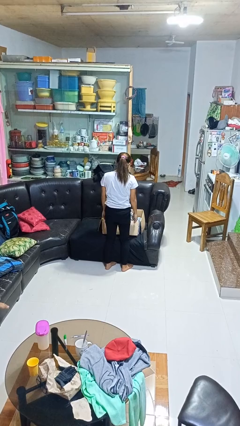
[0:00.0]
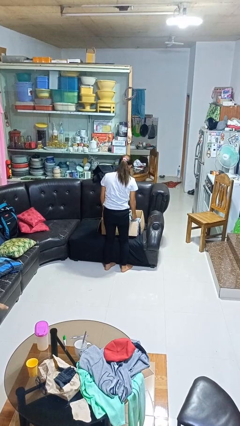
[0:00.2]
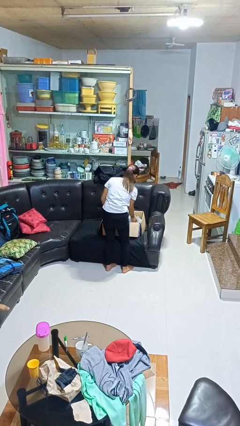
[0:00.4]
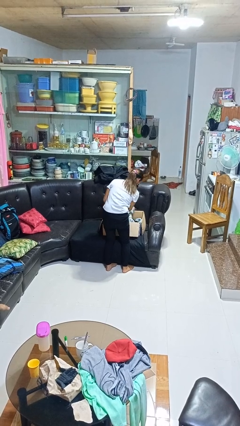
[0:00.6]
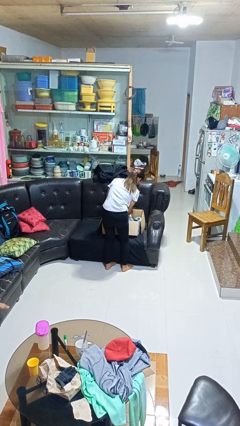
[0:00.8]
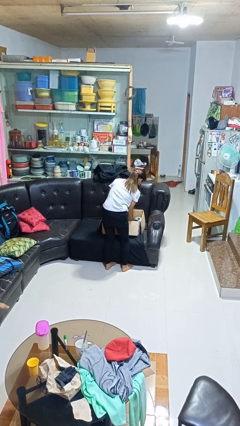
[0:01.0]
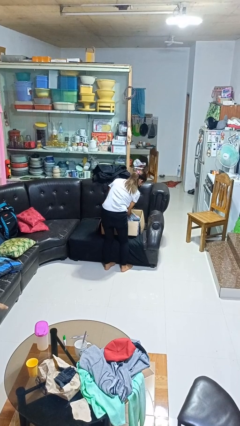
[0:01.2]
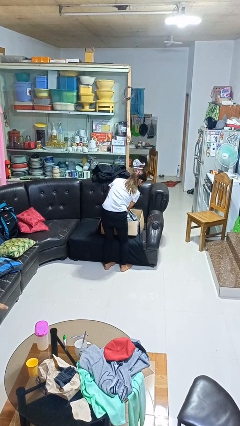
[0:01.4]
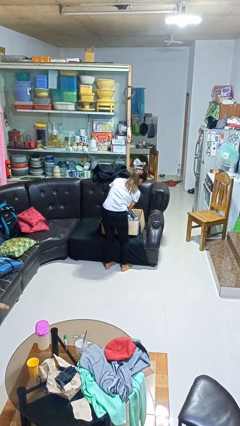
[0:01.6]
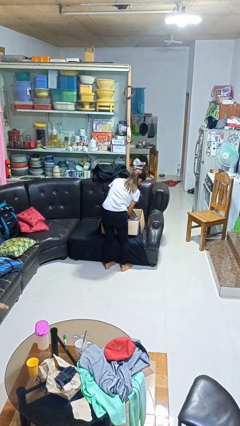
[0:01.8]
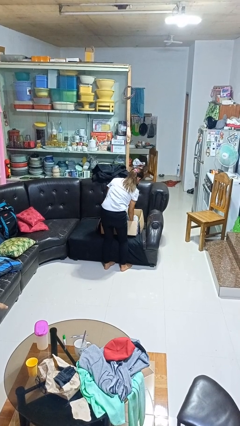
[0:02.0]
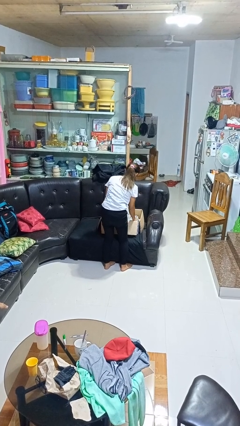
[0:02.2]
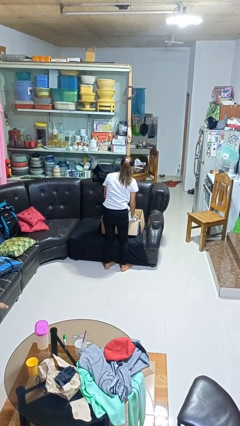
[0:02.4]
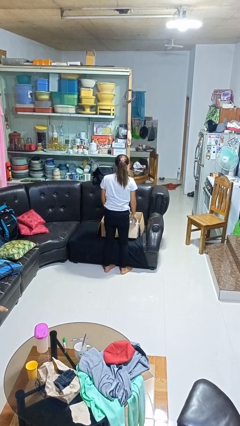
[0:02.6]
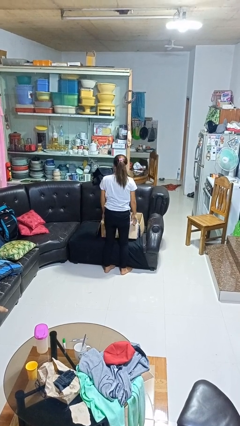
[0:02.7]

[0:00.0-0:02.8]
person searches in box

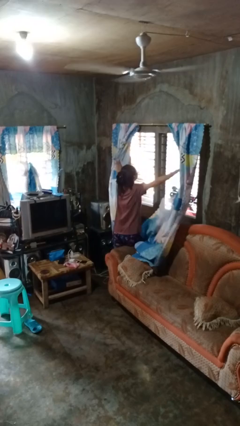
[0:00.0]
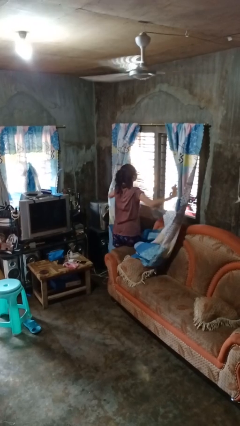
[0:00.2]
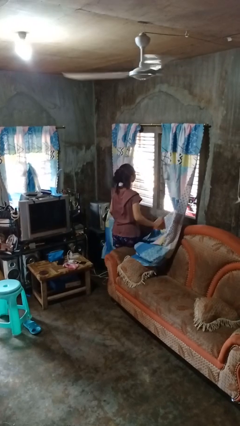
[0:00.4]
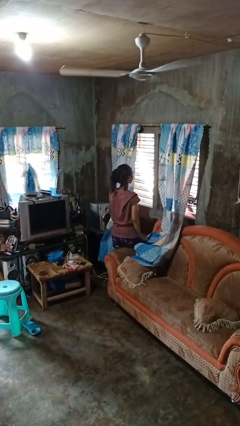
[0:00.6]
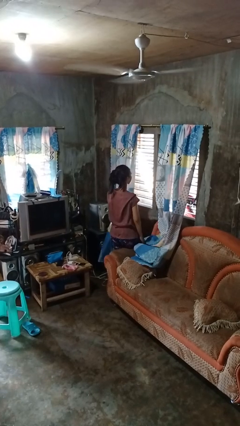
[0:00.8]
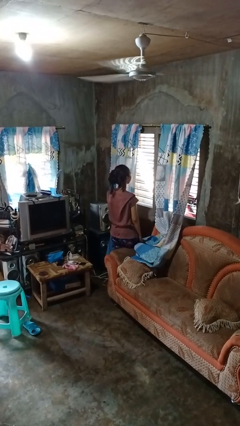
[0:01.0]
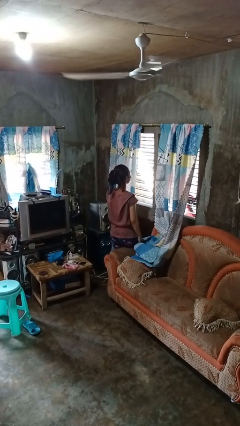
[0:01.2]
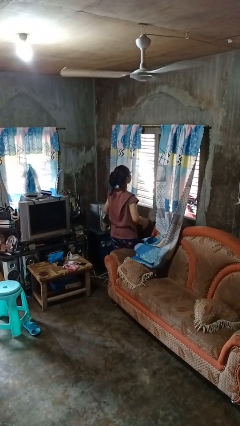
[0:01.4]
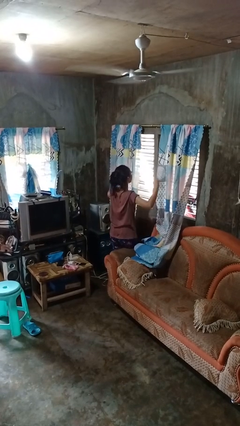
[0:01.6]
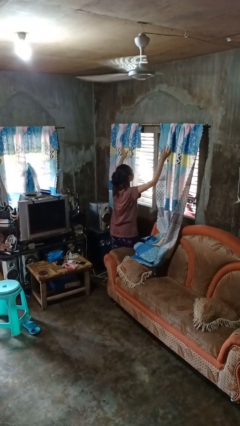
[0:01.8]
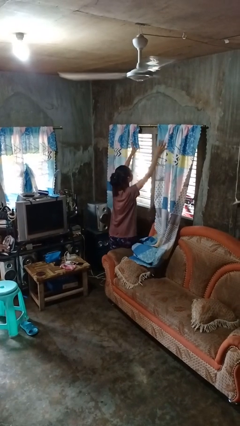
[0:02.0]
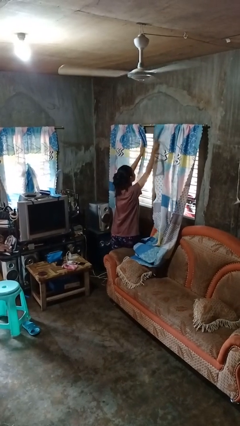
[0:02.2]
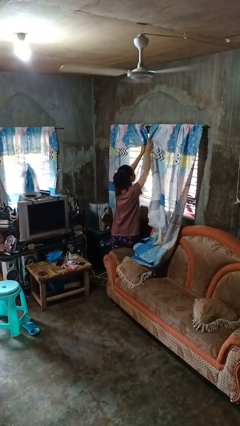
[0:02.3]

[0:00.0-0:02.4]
person opens curtains

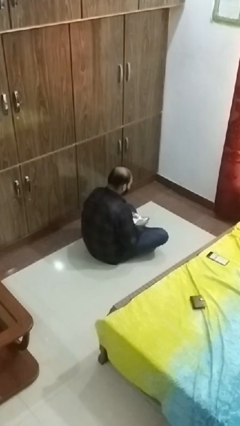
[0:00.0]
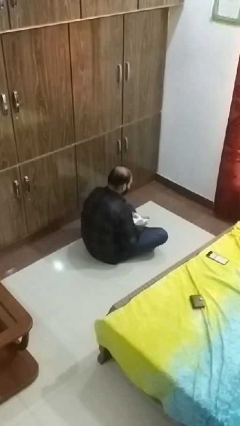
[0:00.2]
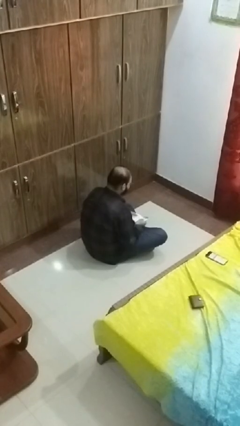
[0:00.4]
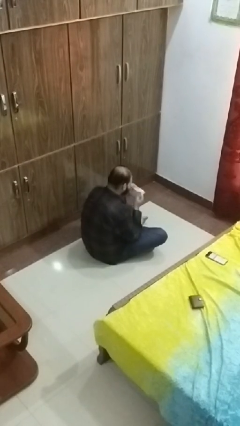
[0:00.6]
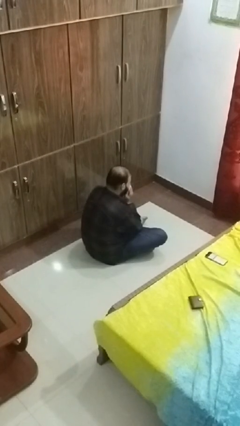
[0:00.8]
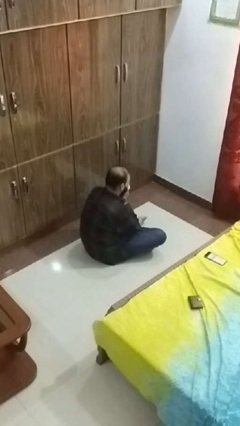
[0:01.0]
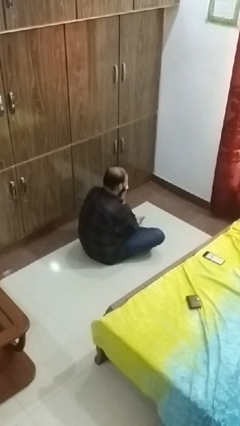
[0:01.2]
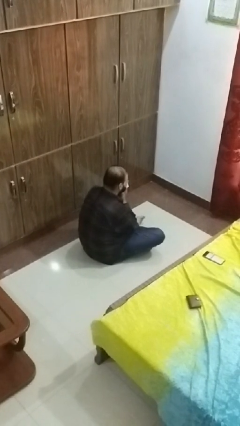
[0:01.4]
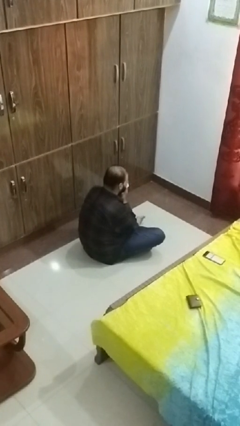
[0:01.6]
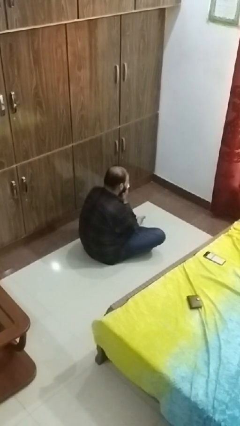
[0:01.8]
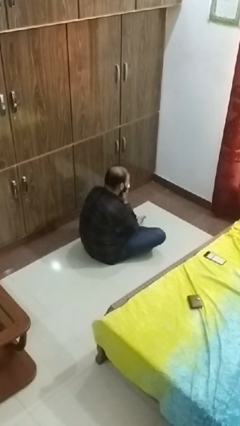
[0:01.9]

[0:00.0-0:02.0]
person blows nose

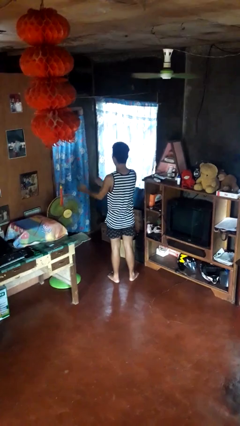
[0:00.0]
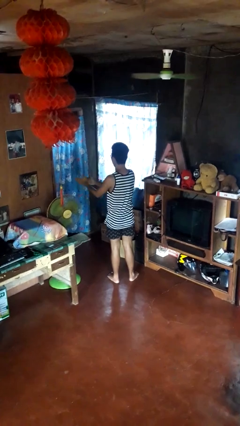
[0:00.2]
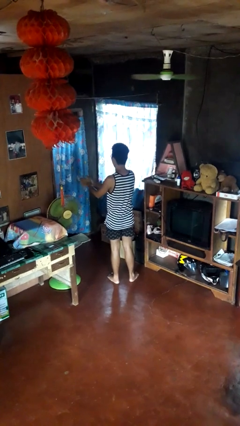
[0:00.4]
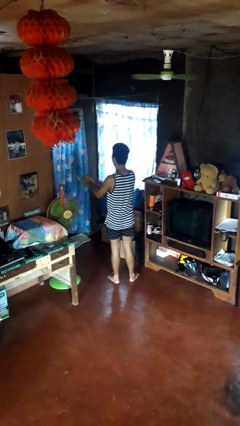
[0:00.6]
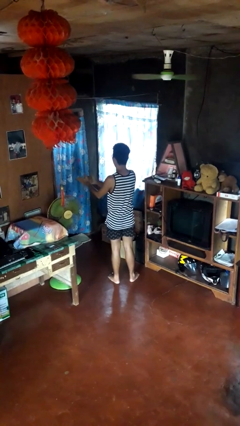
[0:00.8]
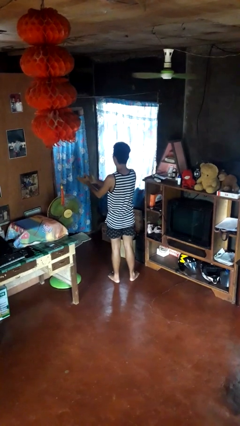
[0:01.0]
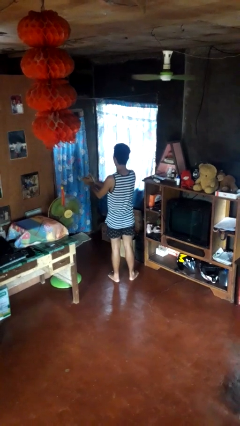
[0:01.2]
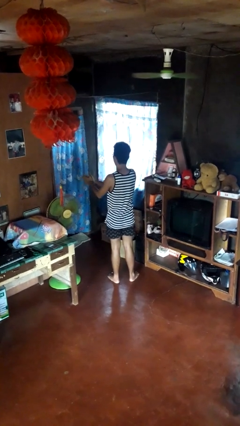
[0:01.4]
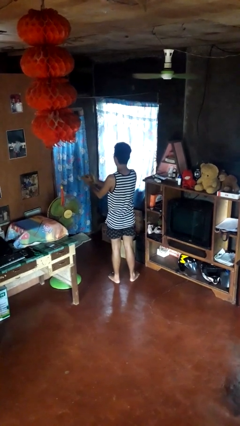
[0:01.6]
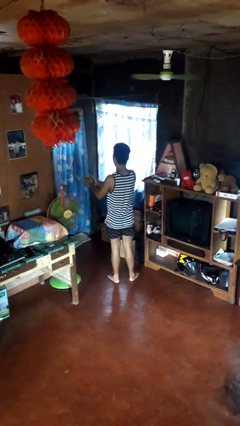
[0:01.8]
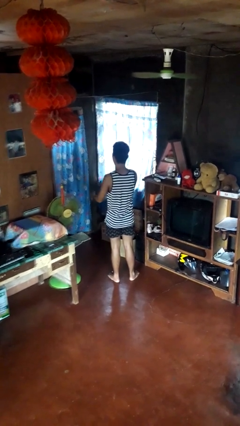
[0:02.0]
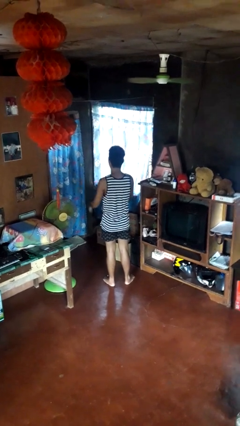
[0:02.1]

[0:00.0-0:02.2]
person claps hands

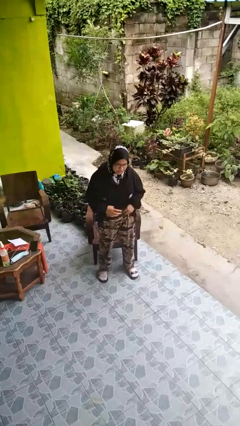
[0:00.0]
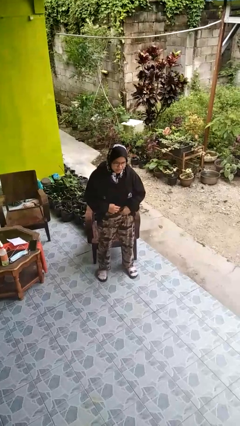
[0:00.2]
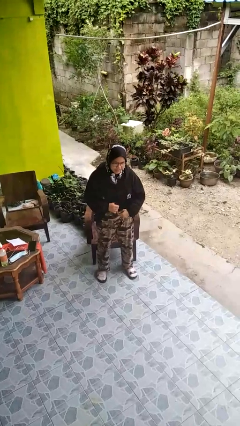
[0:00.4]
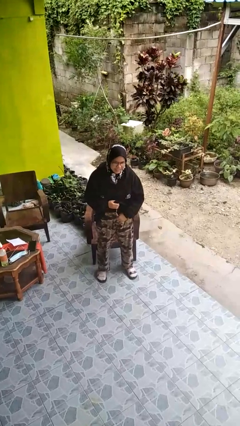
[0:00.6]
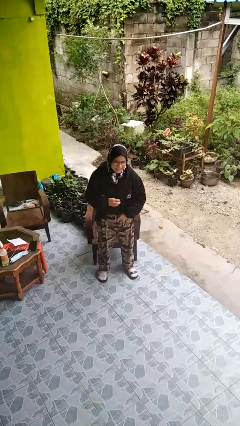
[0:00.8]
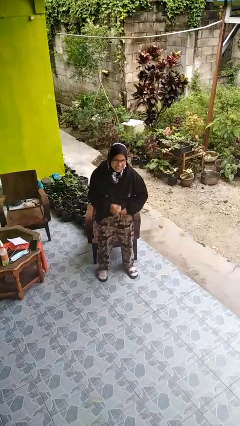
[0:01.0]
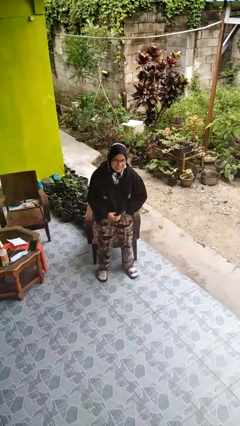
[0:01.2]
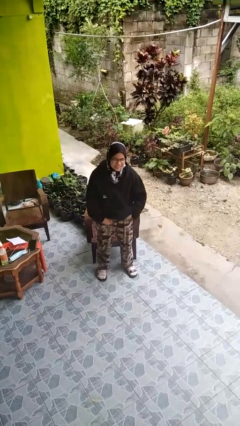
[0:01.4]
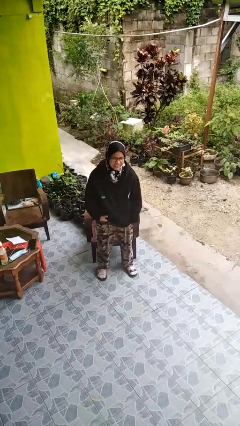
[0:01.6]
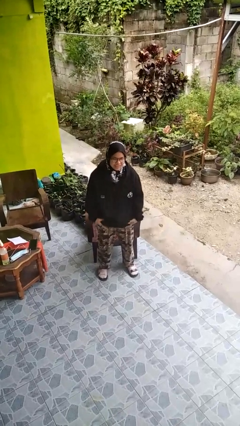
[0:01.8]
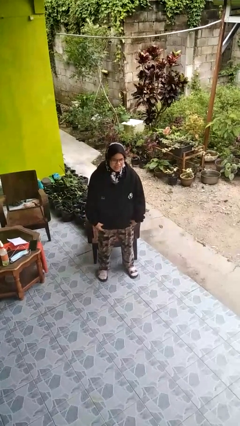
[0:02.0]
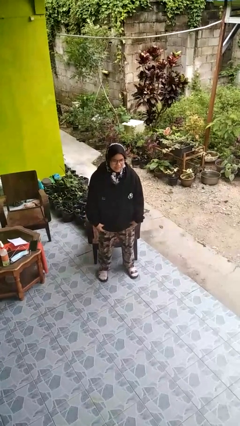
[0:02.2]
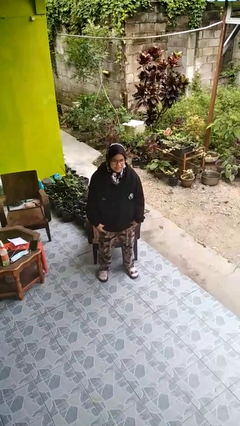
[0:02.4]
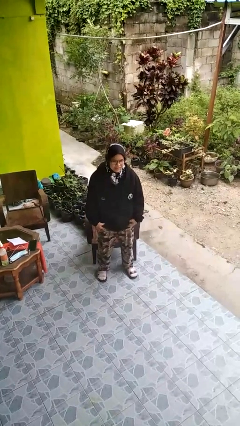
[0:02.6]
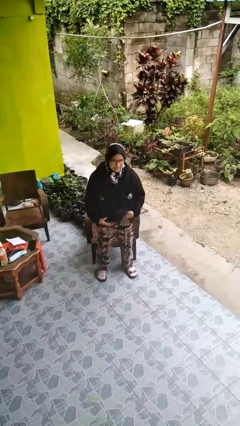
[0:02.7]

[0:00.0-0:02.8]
person untucks shirt

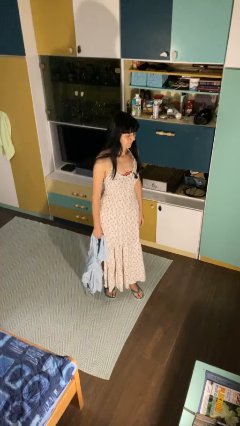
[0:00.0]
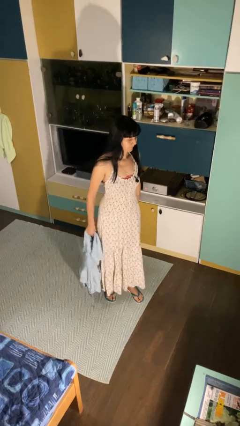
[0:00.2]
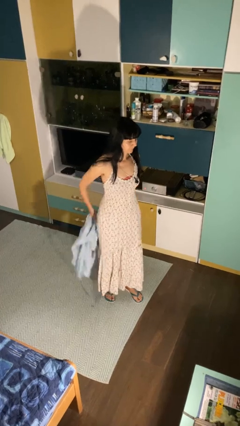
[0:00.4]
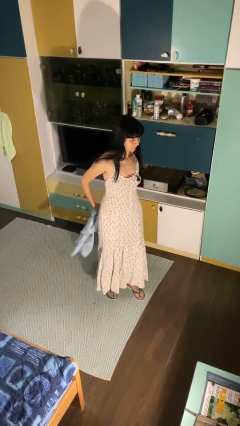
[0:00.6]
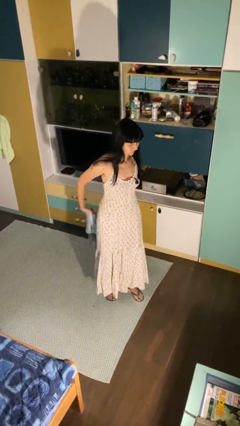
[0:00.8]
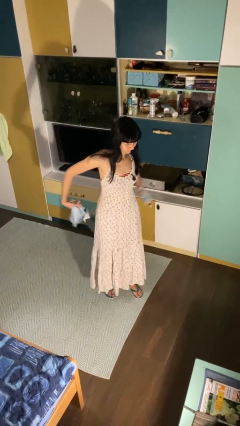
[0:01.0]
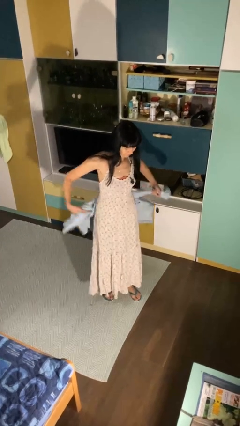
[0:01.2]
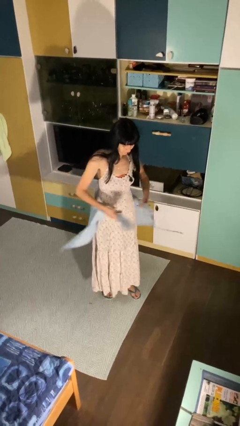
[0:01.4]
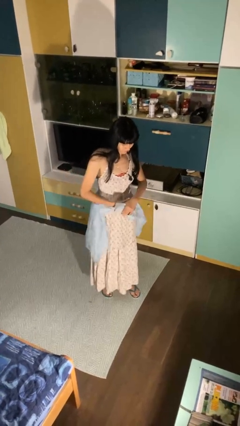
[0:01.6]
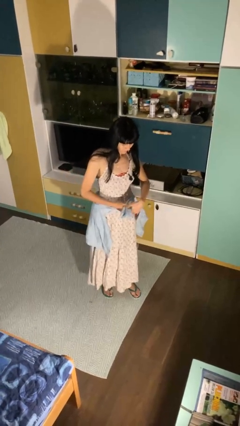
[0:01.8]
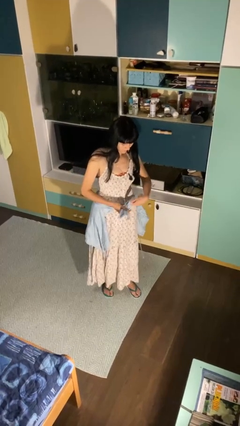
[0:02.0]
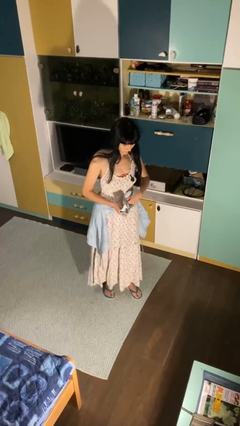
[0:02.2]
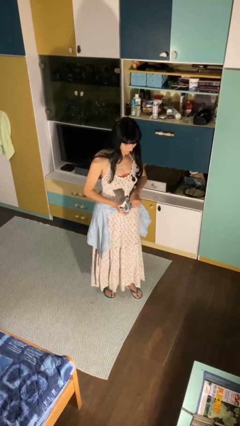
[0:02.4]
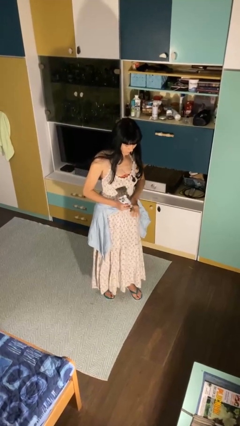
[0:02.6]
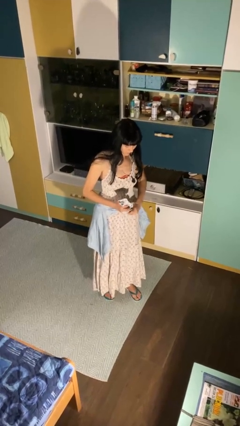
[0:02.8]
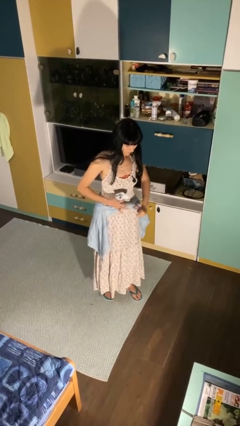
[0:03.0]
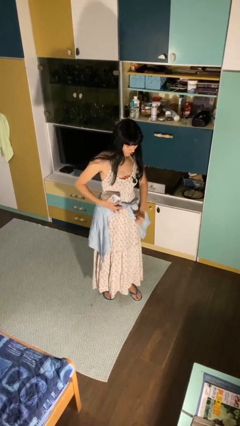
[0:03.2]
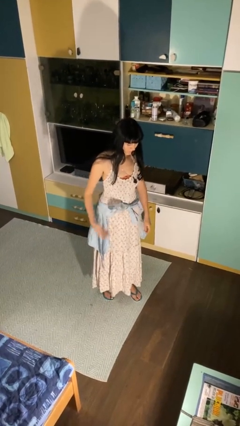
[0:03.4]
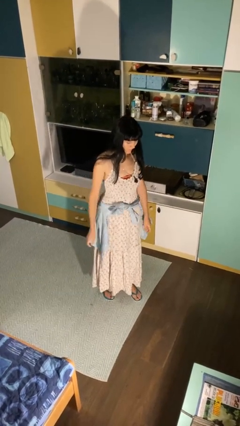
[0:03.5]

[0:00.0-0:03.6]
person ties jacket around waist

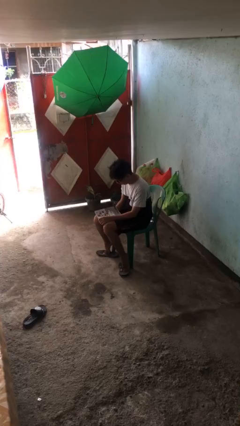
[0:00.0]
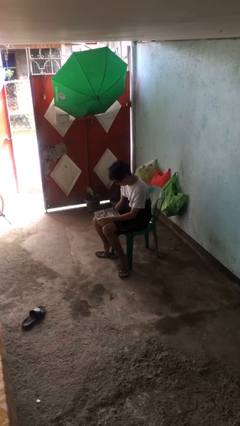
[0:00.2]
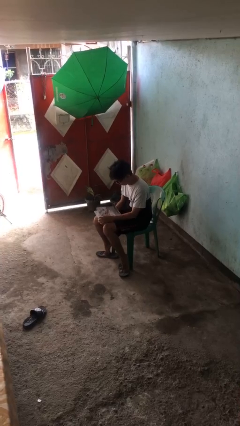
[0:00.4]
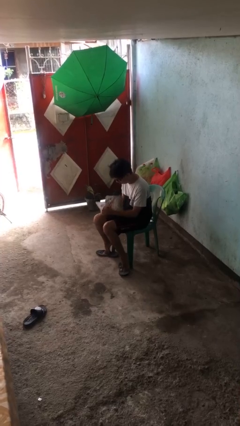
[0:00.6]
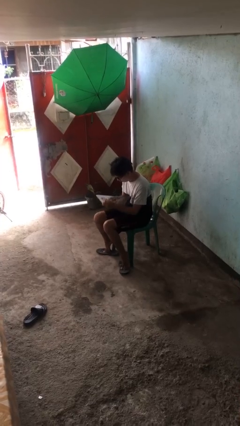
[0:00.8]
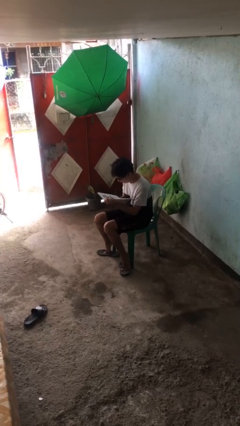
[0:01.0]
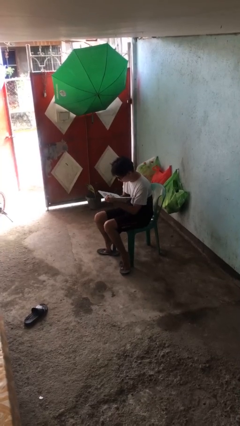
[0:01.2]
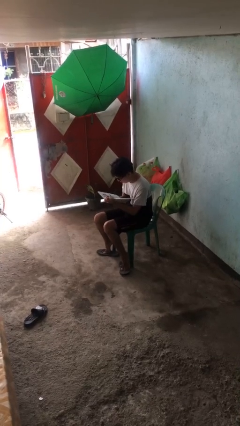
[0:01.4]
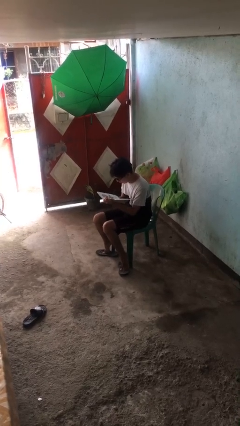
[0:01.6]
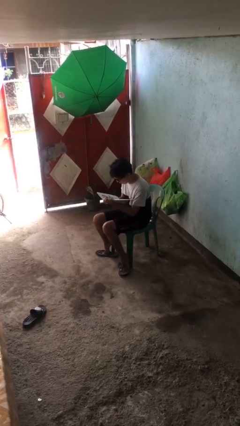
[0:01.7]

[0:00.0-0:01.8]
person reads document
